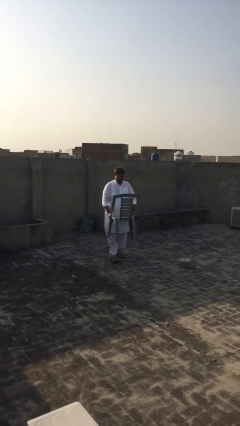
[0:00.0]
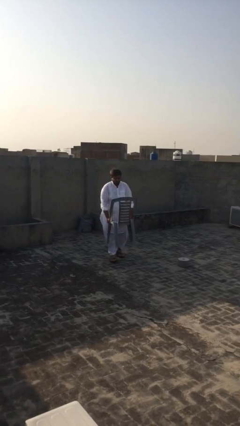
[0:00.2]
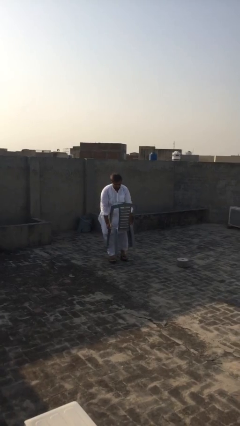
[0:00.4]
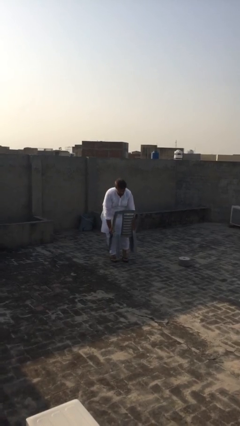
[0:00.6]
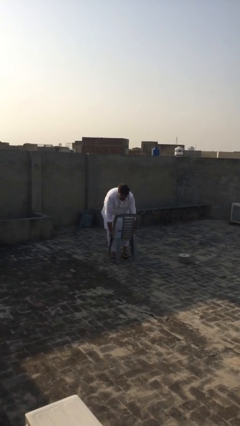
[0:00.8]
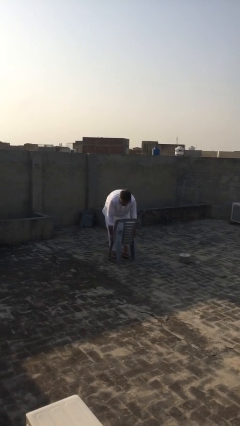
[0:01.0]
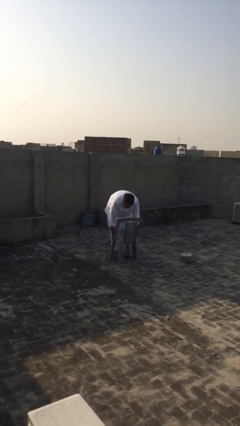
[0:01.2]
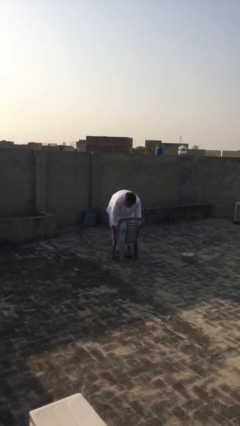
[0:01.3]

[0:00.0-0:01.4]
person puts down object on floor

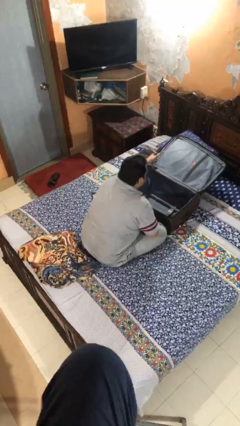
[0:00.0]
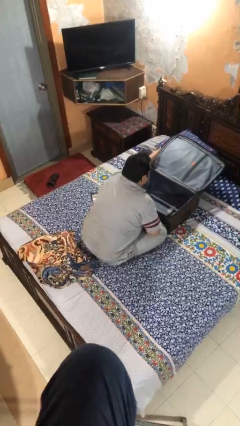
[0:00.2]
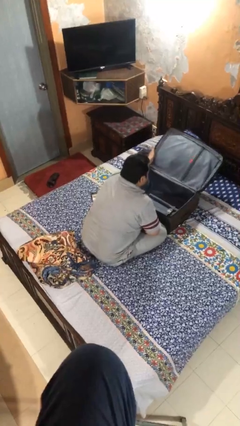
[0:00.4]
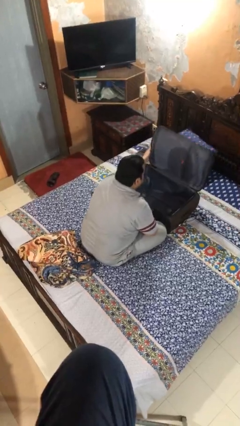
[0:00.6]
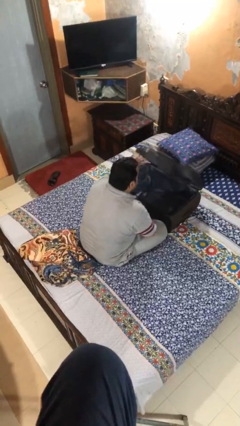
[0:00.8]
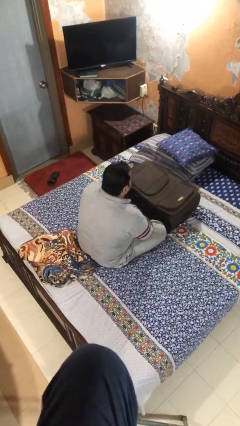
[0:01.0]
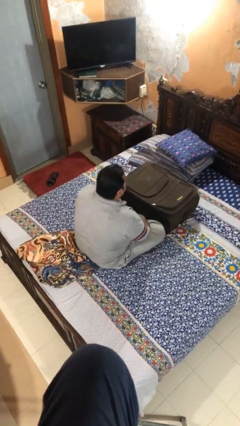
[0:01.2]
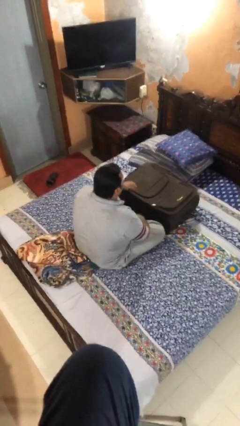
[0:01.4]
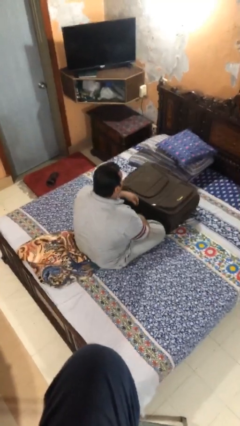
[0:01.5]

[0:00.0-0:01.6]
person closes suitcase

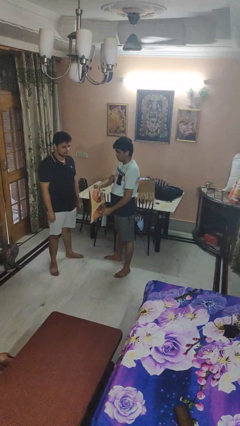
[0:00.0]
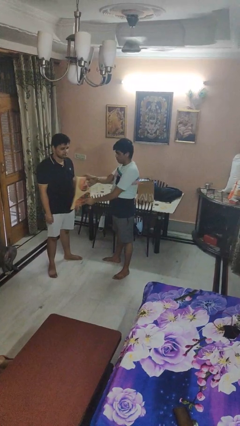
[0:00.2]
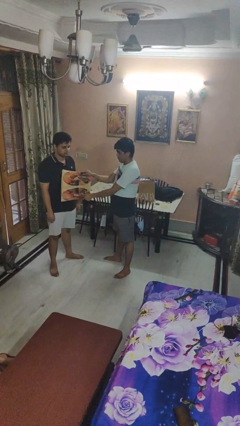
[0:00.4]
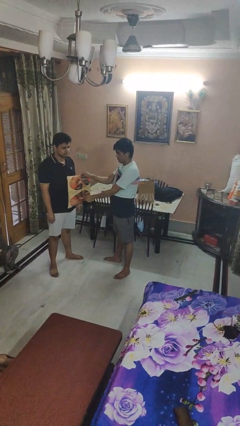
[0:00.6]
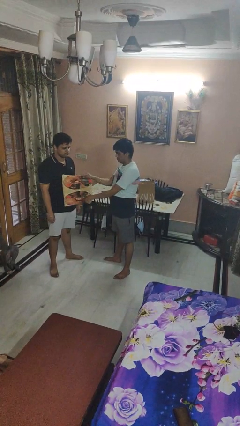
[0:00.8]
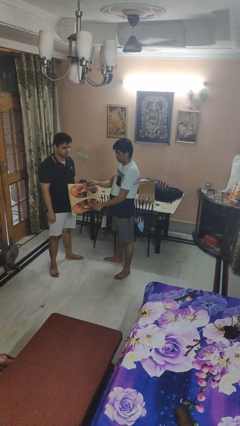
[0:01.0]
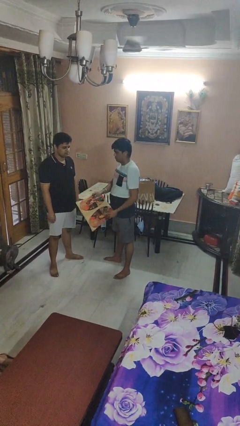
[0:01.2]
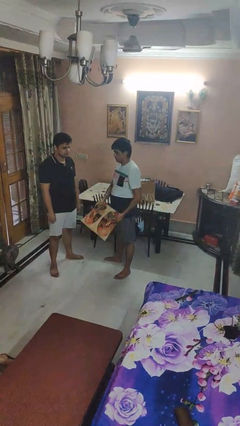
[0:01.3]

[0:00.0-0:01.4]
person hits person with pillow

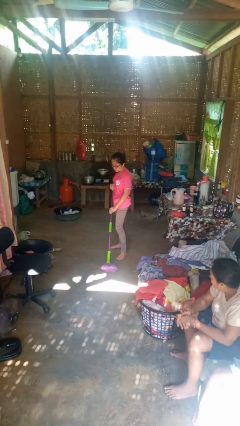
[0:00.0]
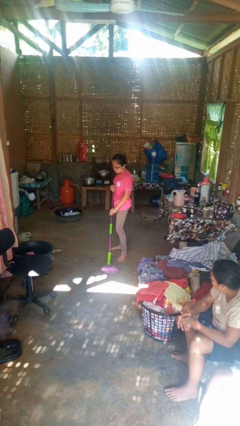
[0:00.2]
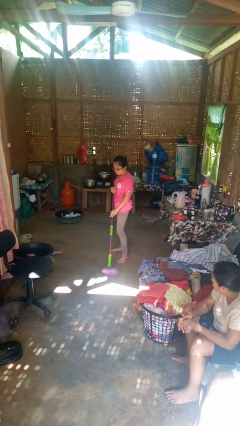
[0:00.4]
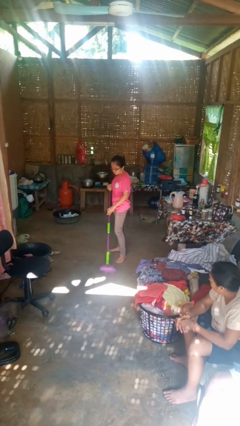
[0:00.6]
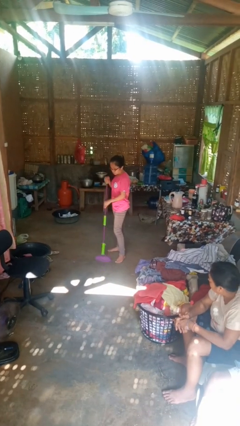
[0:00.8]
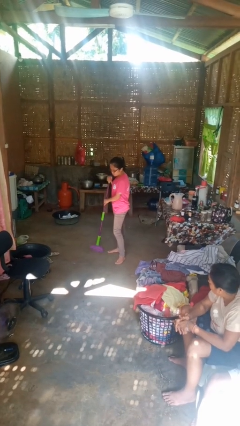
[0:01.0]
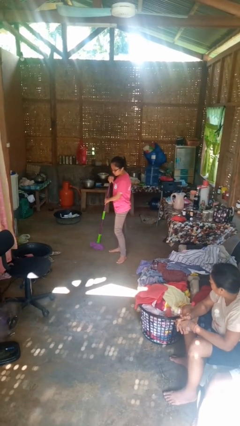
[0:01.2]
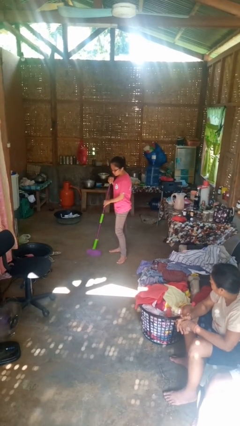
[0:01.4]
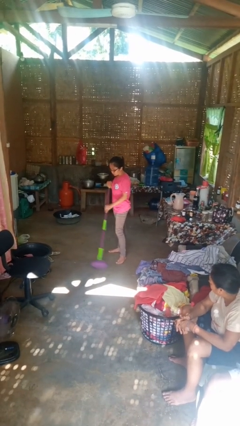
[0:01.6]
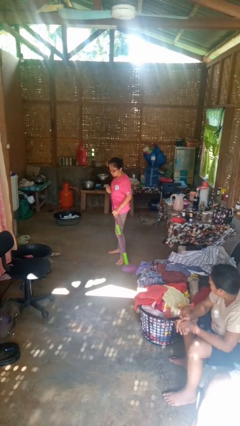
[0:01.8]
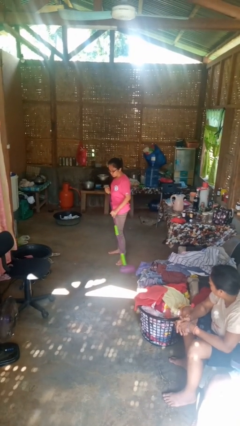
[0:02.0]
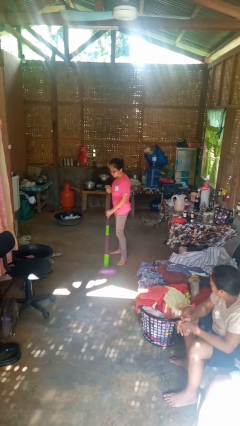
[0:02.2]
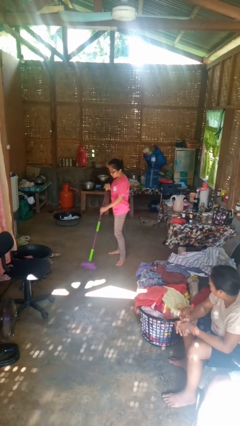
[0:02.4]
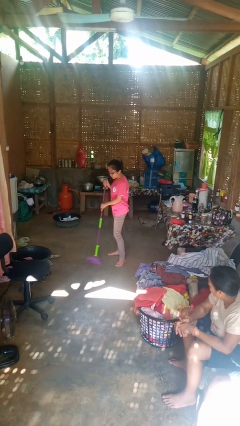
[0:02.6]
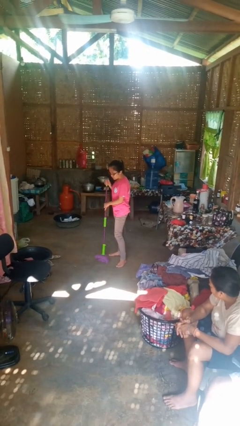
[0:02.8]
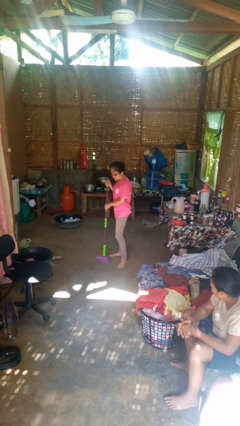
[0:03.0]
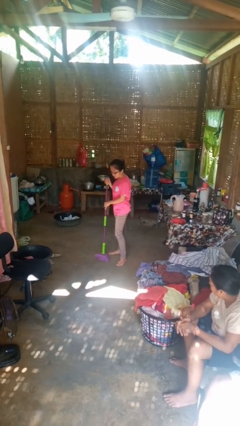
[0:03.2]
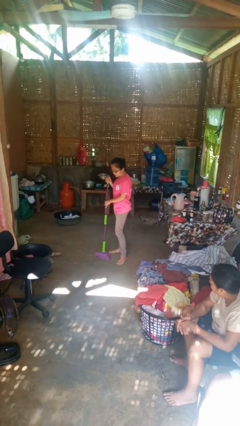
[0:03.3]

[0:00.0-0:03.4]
person mops

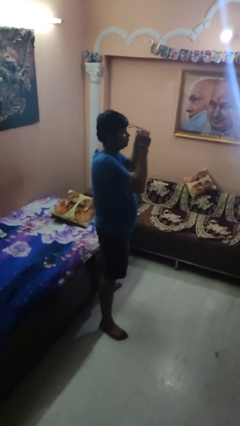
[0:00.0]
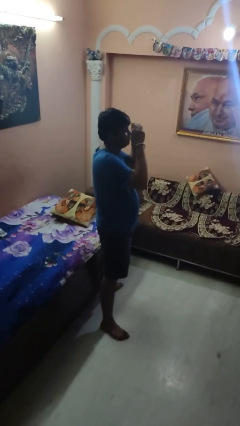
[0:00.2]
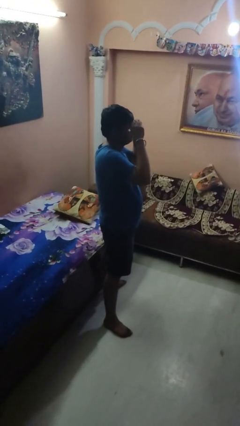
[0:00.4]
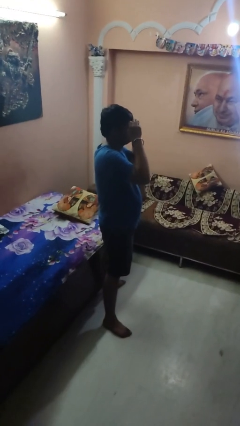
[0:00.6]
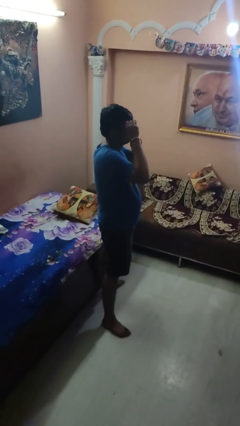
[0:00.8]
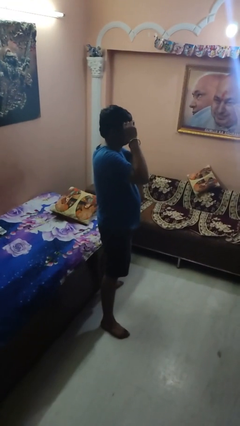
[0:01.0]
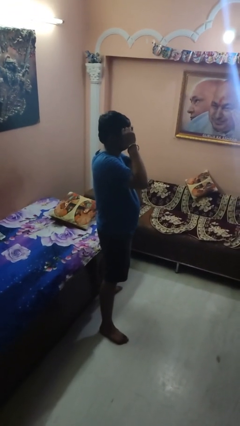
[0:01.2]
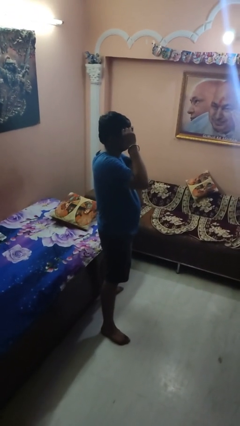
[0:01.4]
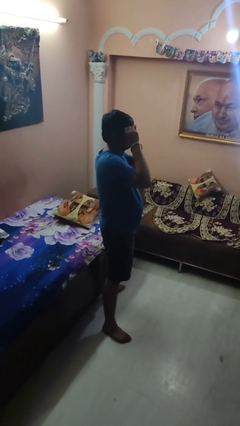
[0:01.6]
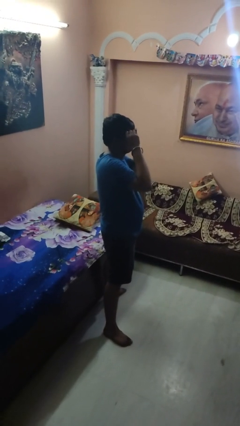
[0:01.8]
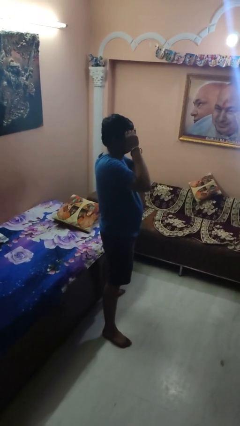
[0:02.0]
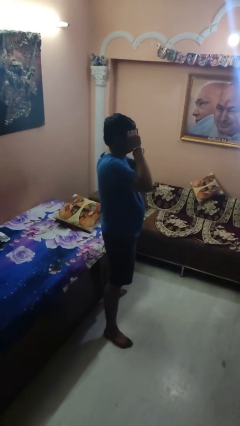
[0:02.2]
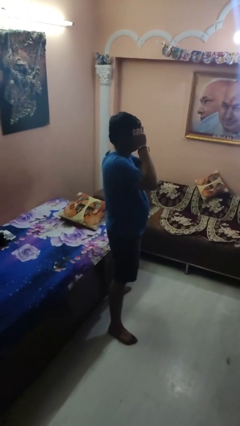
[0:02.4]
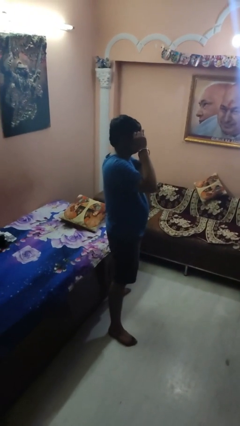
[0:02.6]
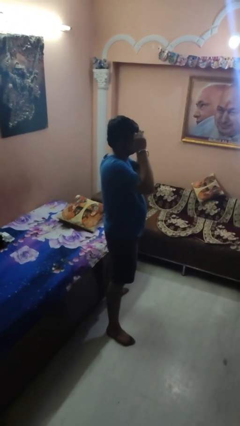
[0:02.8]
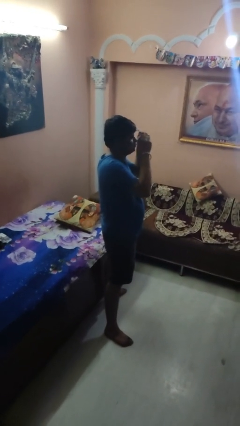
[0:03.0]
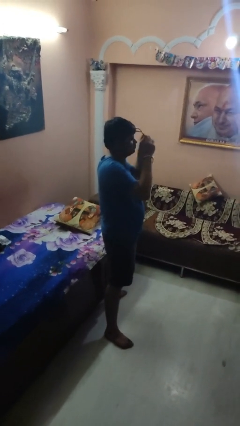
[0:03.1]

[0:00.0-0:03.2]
person puts on glasses

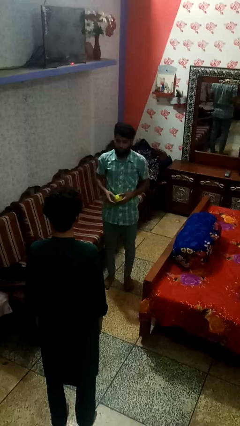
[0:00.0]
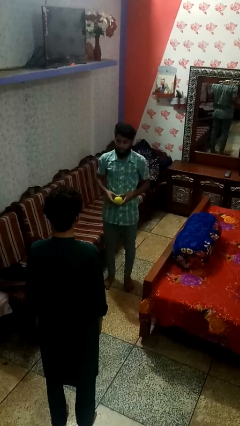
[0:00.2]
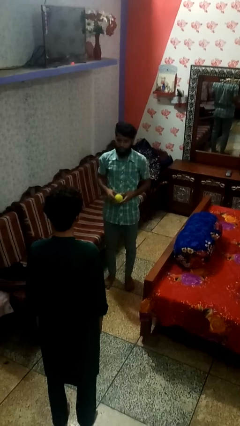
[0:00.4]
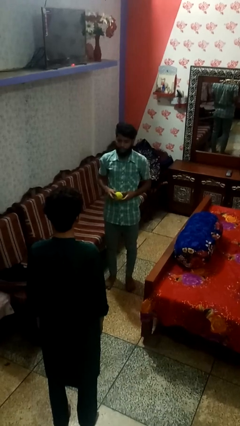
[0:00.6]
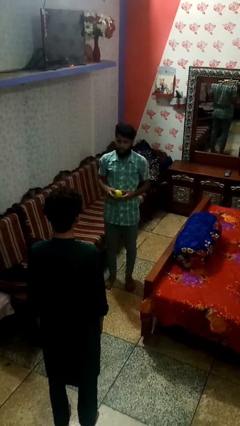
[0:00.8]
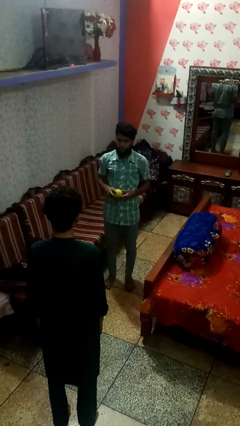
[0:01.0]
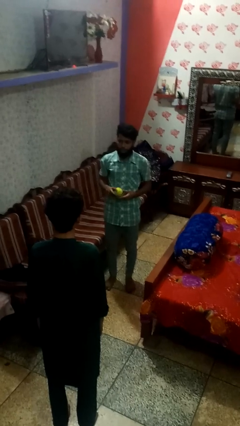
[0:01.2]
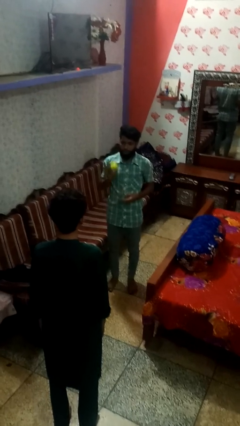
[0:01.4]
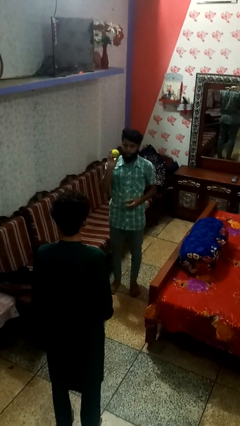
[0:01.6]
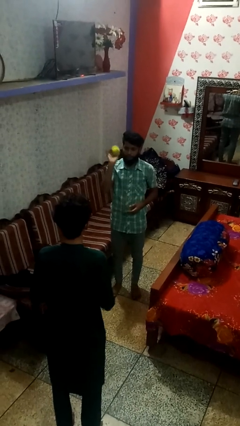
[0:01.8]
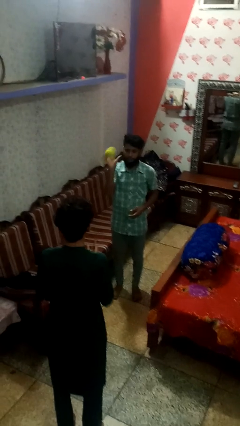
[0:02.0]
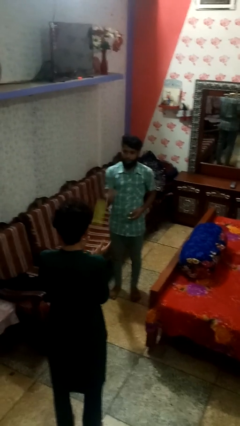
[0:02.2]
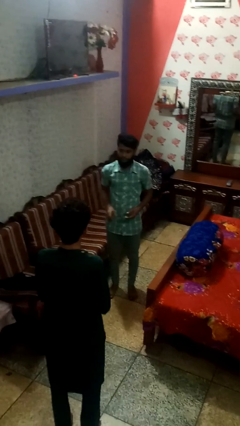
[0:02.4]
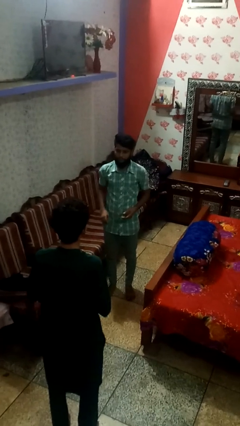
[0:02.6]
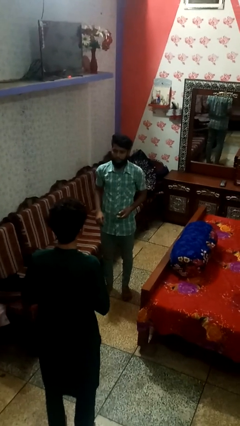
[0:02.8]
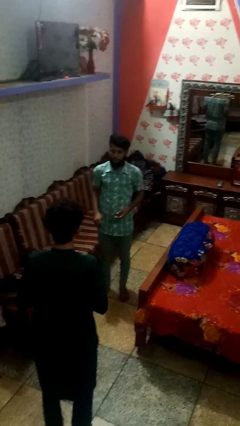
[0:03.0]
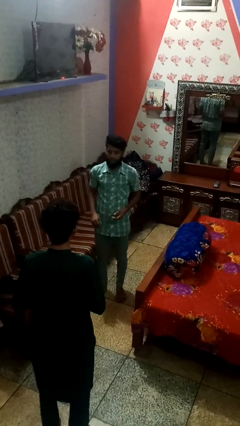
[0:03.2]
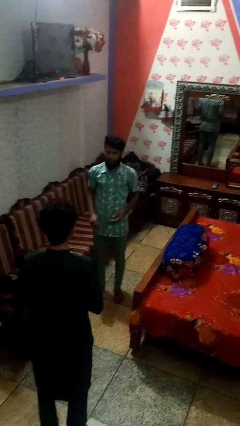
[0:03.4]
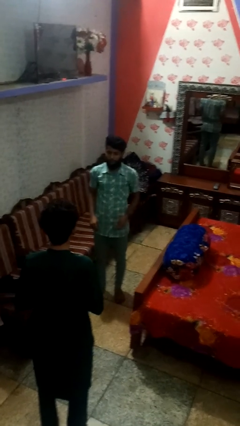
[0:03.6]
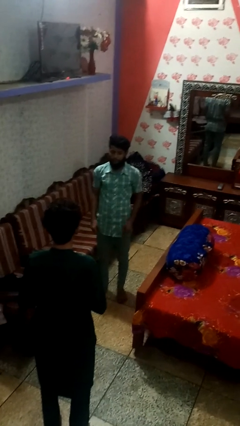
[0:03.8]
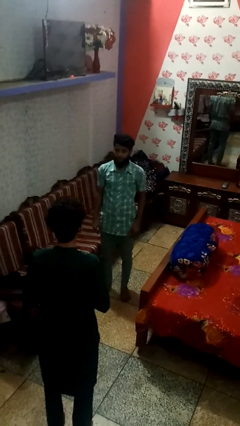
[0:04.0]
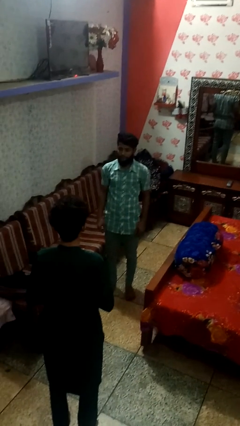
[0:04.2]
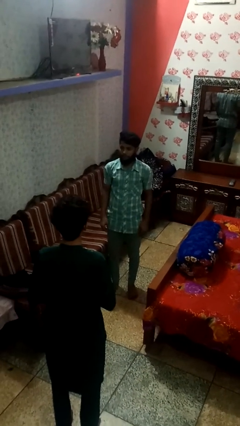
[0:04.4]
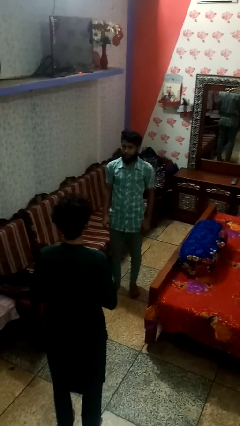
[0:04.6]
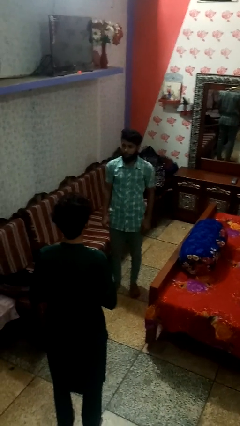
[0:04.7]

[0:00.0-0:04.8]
person throws object to person

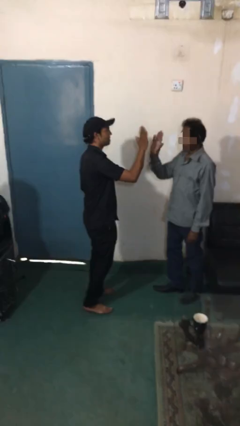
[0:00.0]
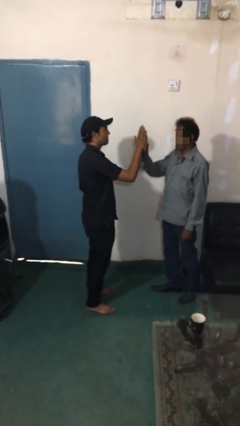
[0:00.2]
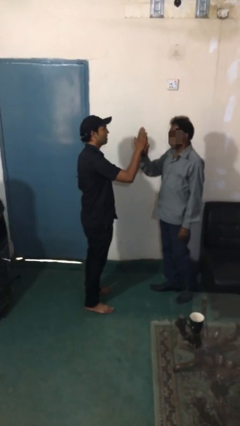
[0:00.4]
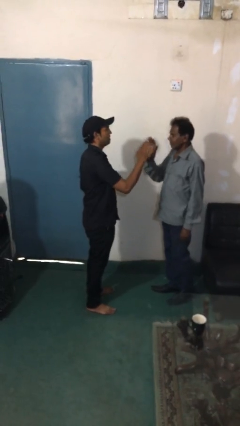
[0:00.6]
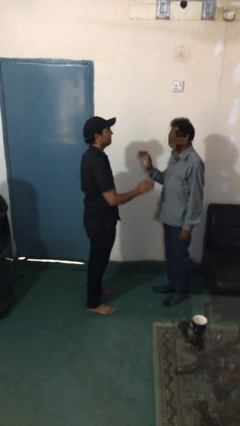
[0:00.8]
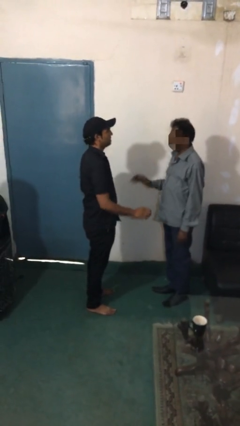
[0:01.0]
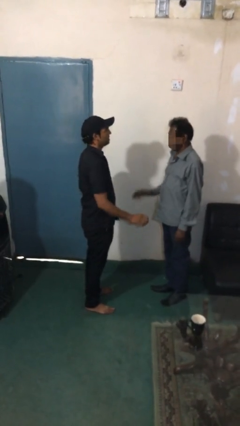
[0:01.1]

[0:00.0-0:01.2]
person highfives hand
